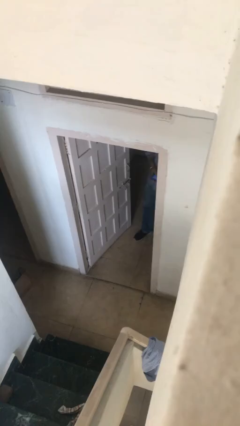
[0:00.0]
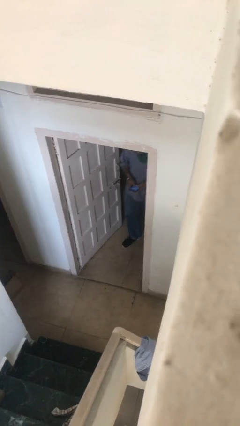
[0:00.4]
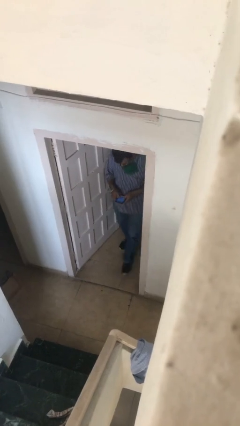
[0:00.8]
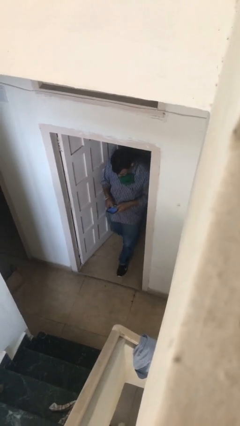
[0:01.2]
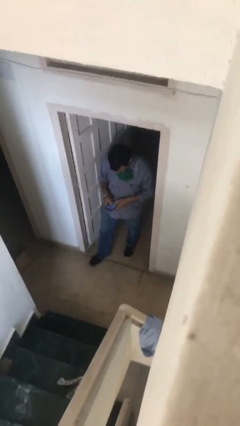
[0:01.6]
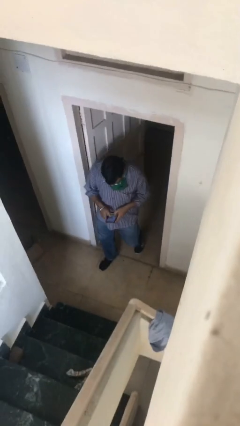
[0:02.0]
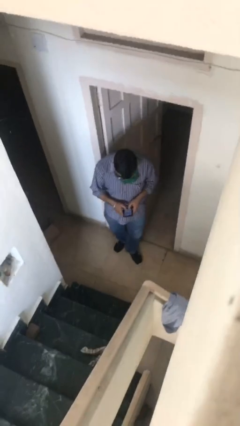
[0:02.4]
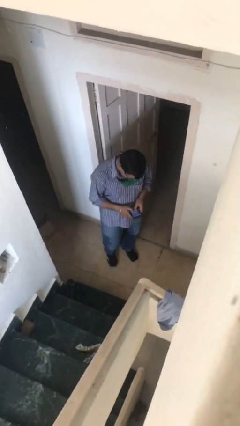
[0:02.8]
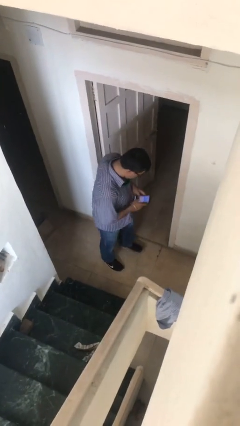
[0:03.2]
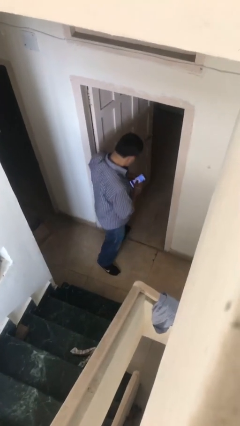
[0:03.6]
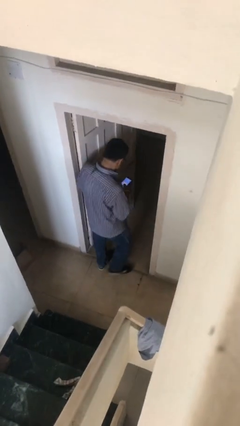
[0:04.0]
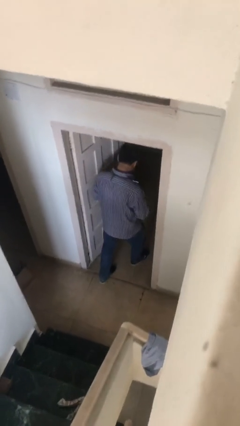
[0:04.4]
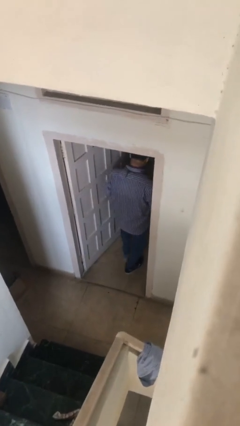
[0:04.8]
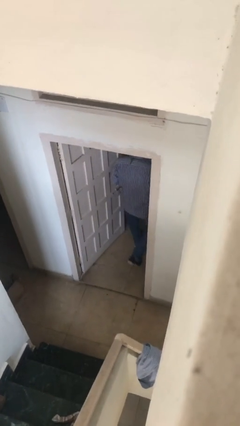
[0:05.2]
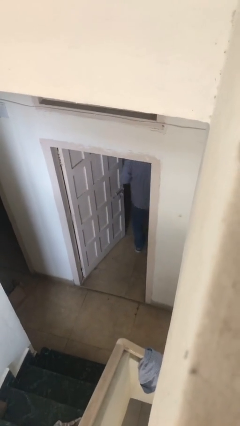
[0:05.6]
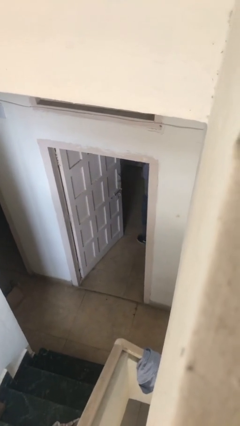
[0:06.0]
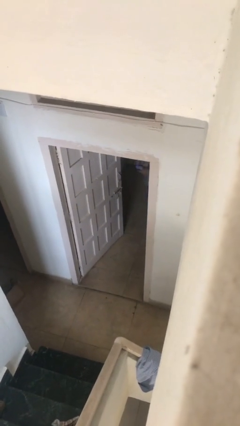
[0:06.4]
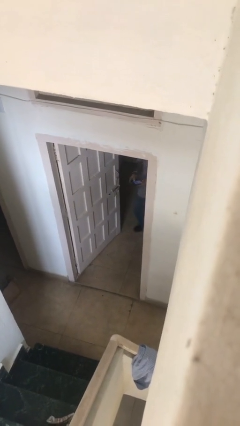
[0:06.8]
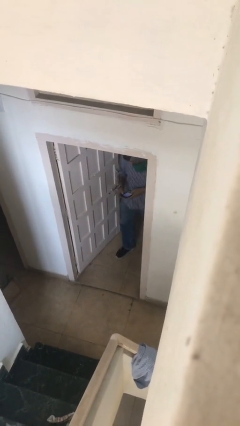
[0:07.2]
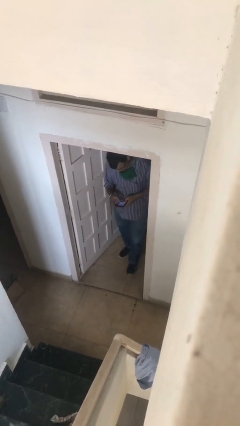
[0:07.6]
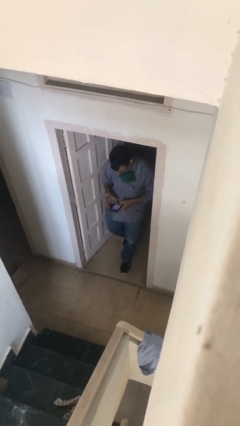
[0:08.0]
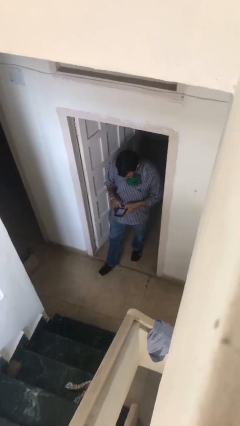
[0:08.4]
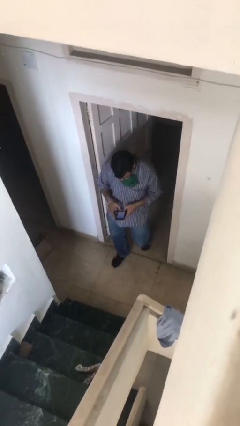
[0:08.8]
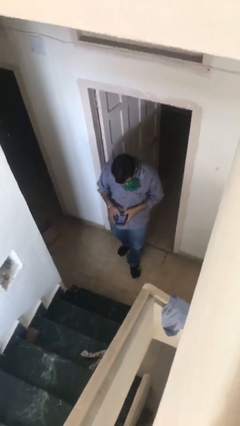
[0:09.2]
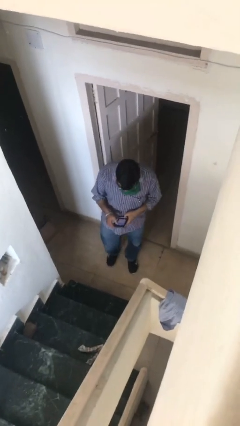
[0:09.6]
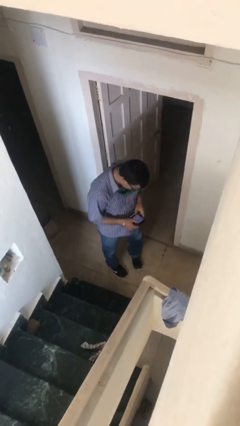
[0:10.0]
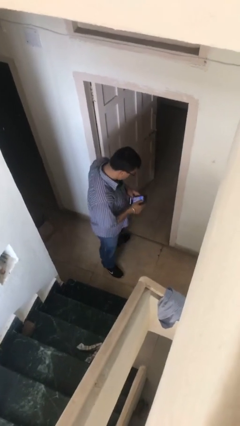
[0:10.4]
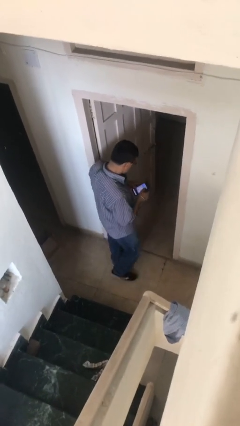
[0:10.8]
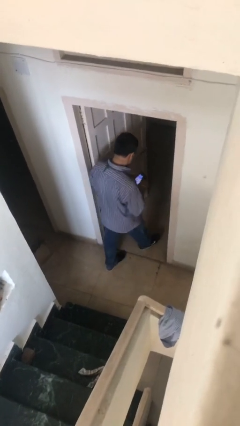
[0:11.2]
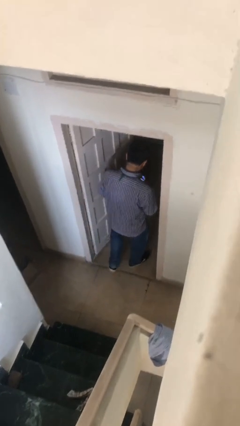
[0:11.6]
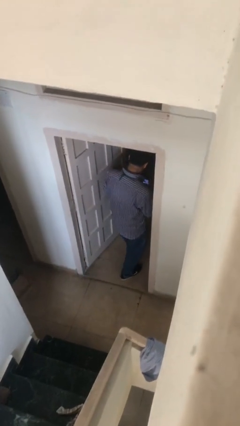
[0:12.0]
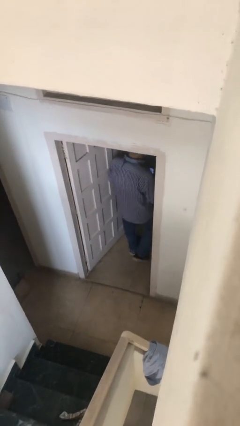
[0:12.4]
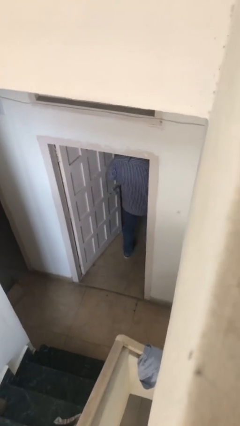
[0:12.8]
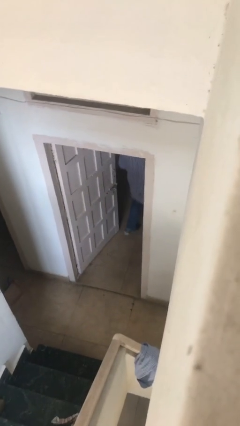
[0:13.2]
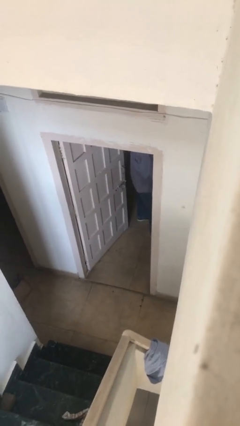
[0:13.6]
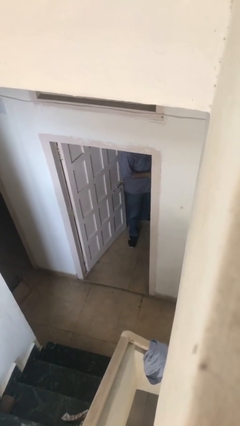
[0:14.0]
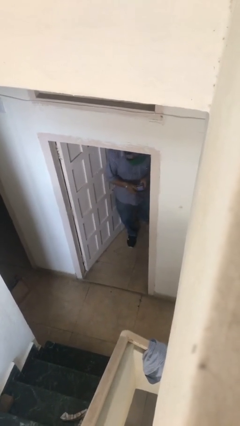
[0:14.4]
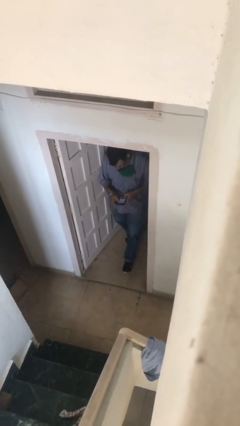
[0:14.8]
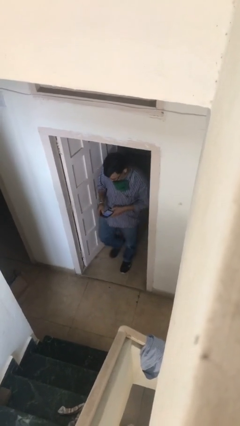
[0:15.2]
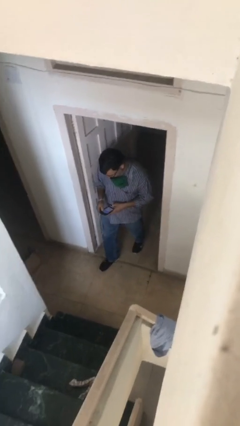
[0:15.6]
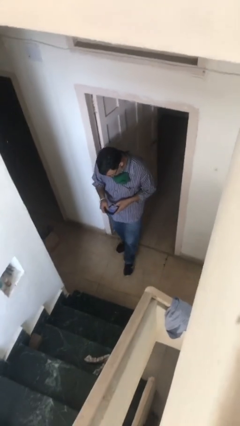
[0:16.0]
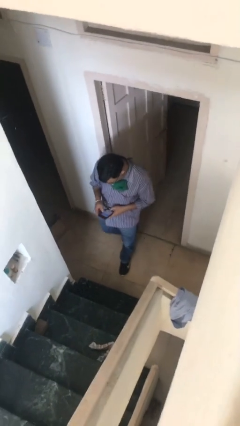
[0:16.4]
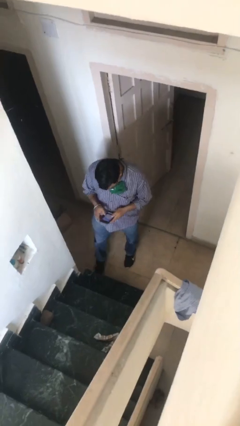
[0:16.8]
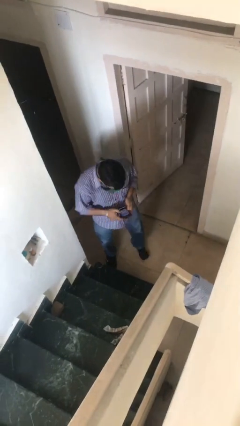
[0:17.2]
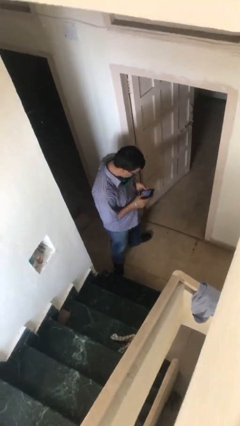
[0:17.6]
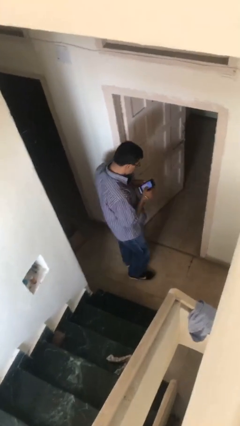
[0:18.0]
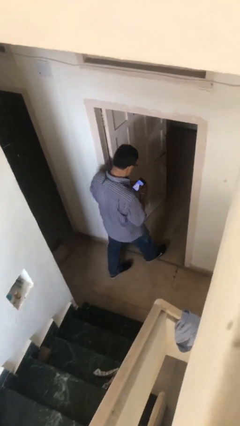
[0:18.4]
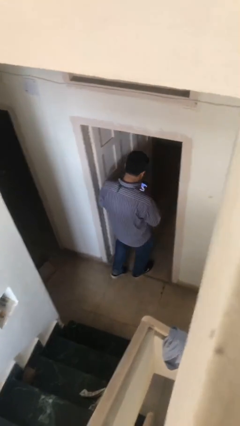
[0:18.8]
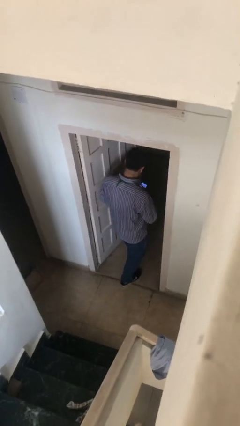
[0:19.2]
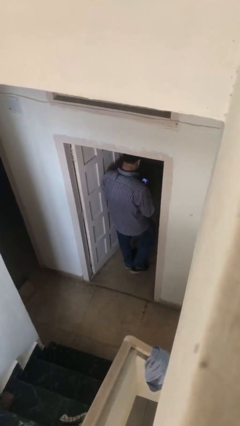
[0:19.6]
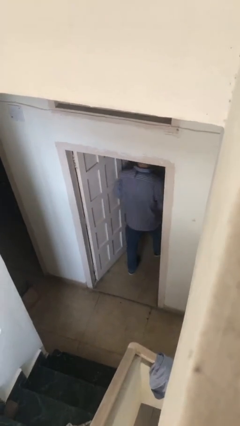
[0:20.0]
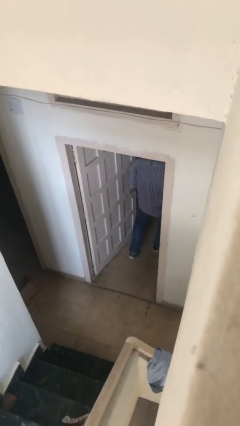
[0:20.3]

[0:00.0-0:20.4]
person texts on phone

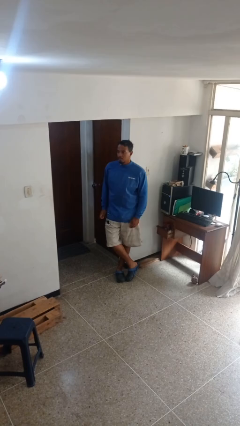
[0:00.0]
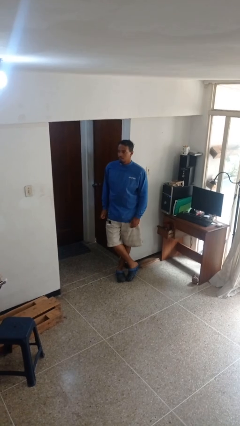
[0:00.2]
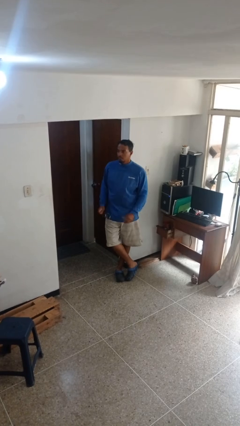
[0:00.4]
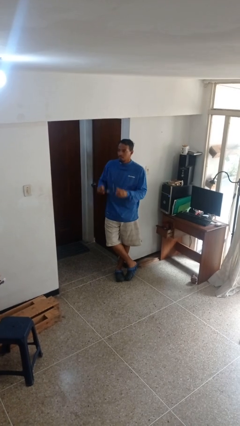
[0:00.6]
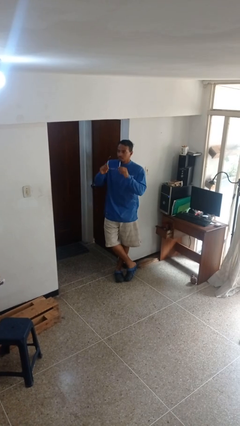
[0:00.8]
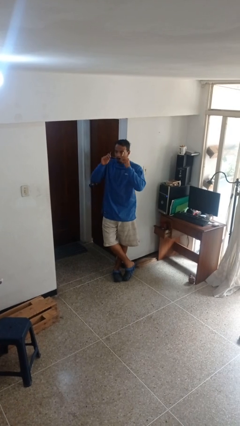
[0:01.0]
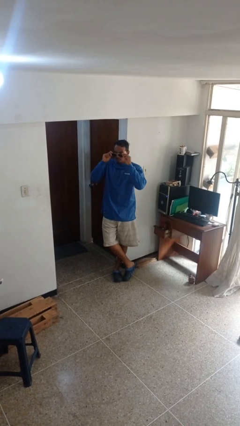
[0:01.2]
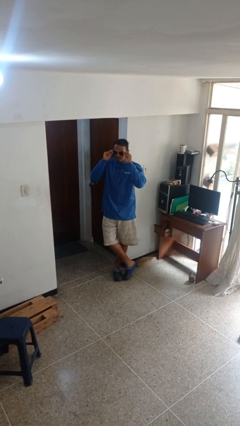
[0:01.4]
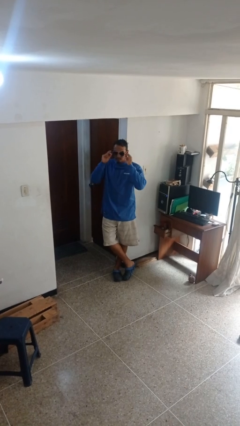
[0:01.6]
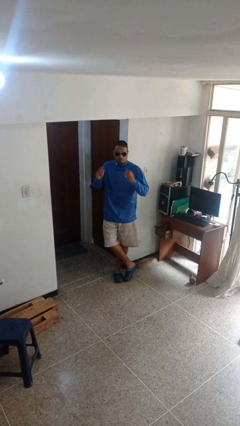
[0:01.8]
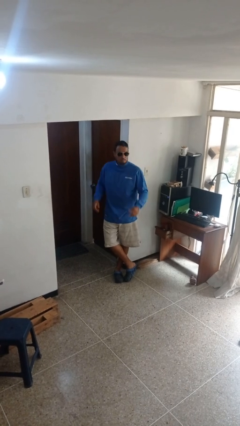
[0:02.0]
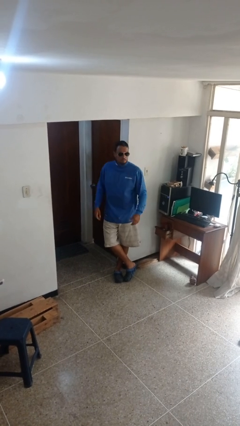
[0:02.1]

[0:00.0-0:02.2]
person puts on sunglasses

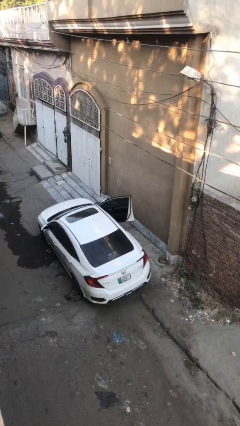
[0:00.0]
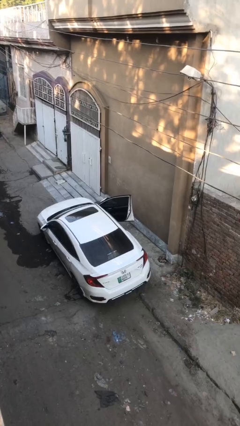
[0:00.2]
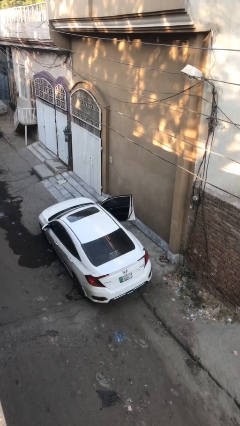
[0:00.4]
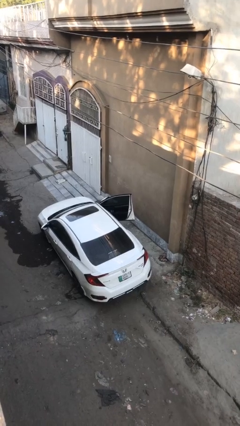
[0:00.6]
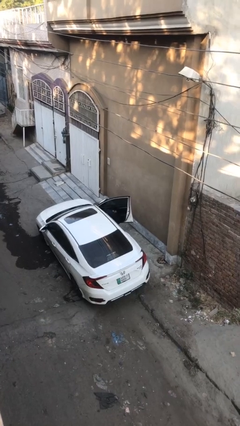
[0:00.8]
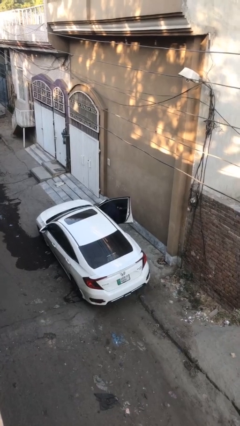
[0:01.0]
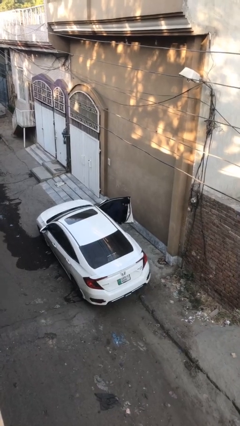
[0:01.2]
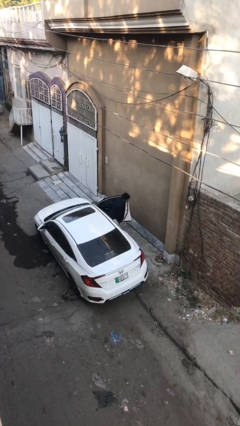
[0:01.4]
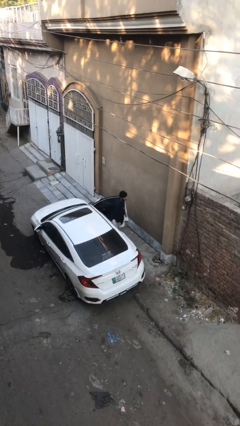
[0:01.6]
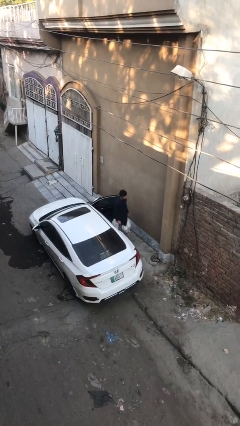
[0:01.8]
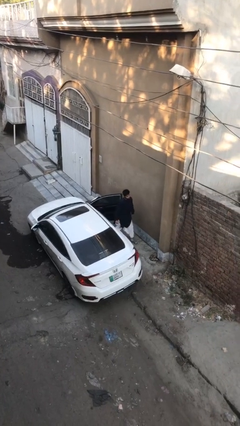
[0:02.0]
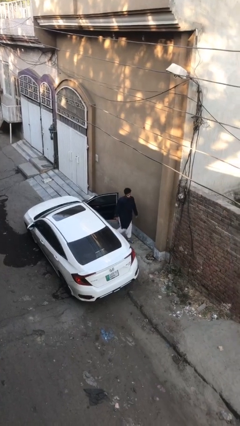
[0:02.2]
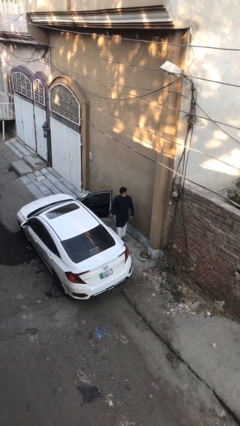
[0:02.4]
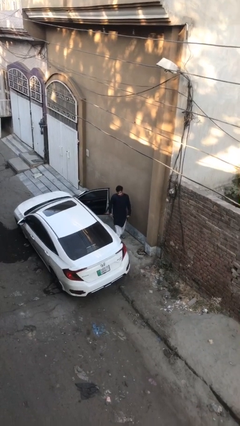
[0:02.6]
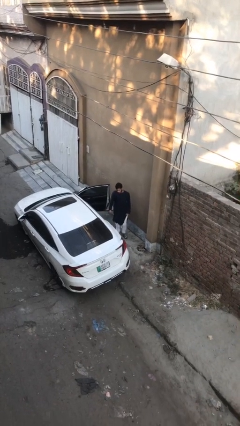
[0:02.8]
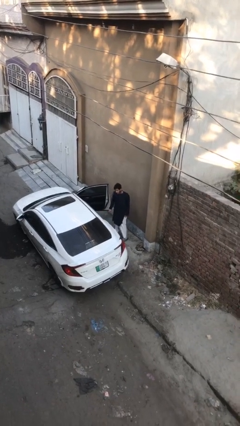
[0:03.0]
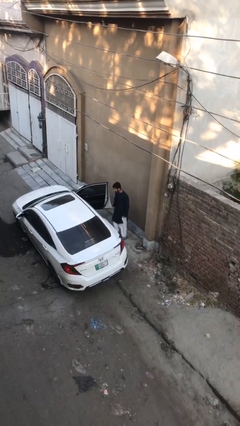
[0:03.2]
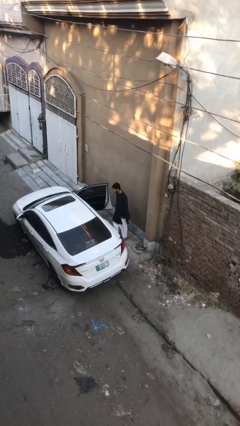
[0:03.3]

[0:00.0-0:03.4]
person exits car

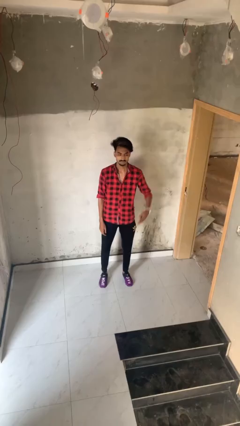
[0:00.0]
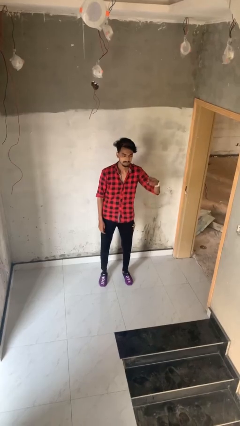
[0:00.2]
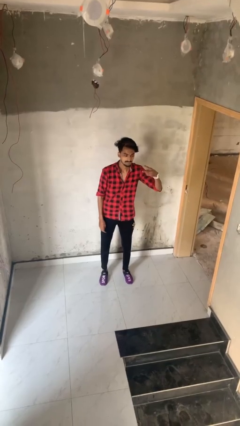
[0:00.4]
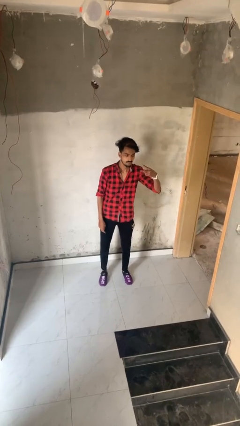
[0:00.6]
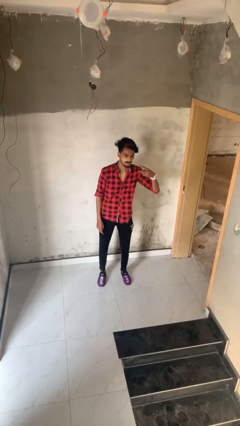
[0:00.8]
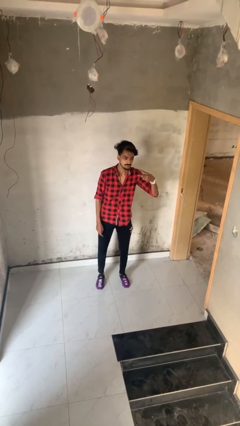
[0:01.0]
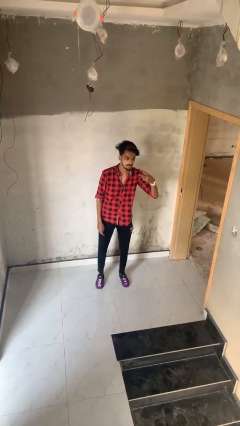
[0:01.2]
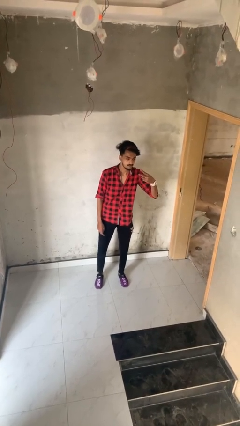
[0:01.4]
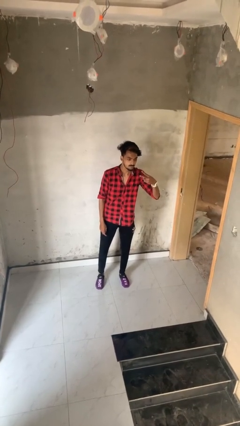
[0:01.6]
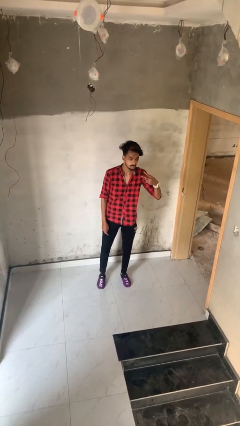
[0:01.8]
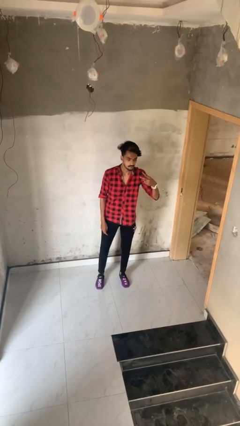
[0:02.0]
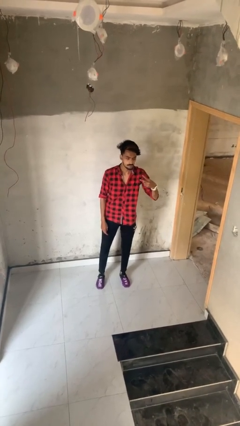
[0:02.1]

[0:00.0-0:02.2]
person gestures peace
